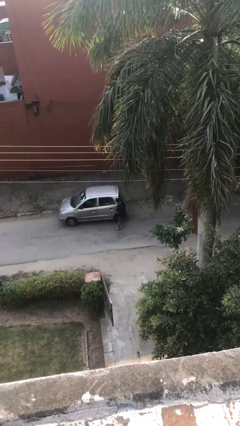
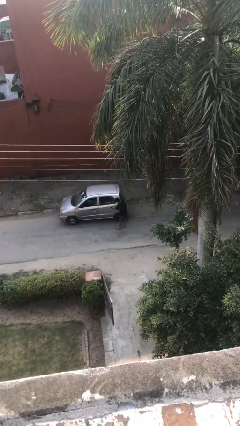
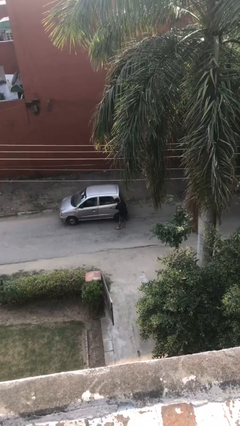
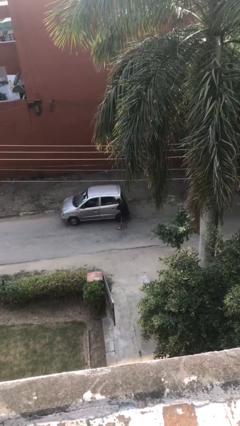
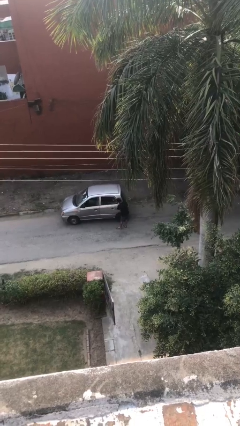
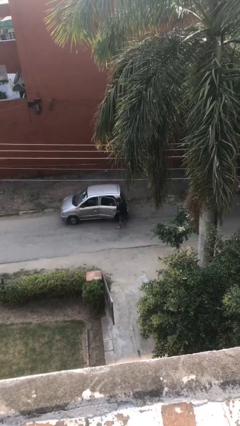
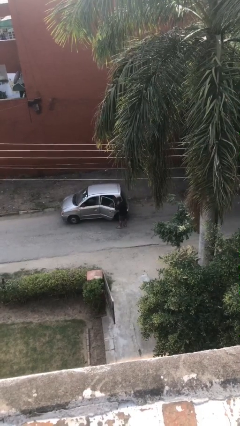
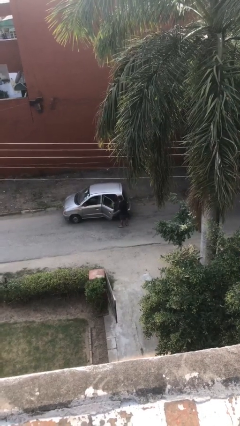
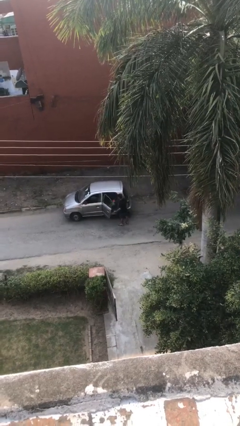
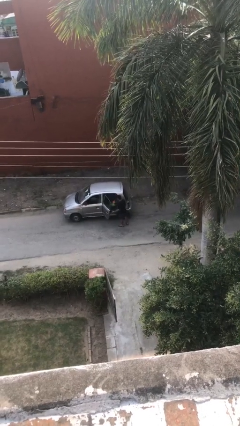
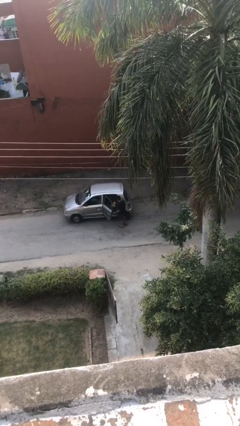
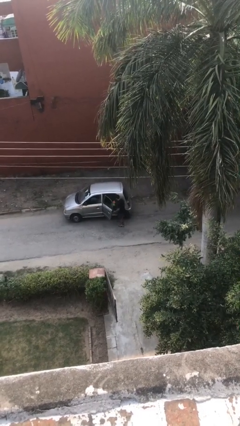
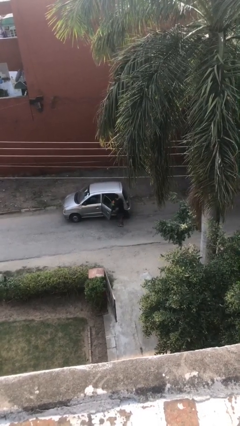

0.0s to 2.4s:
person opens car door

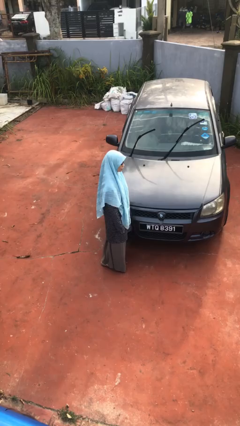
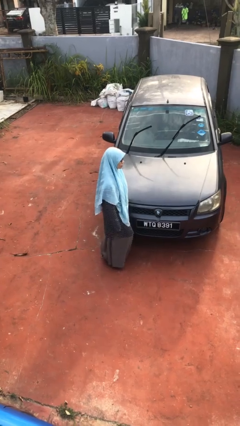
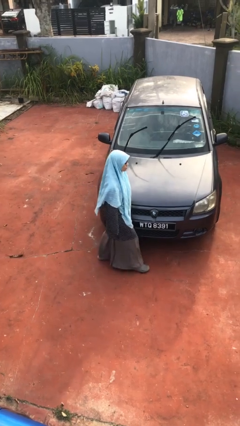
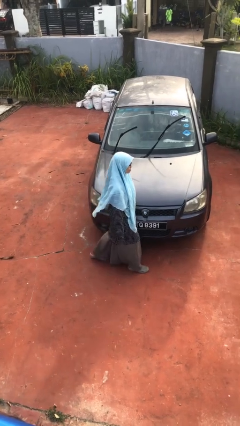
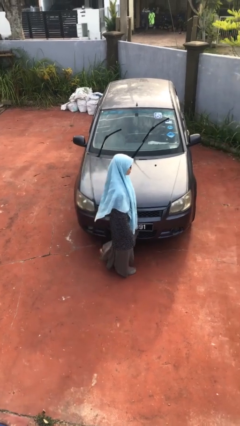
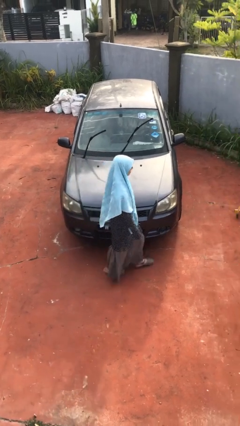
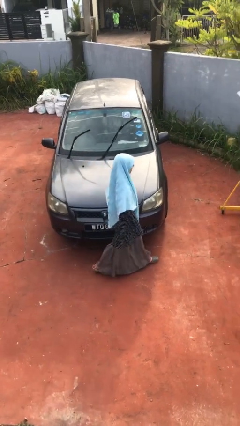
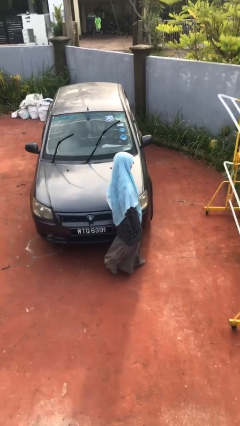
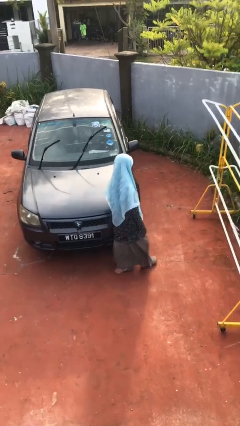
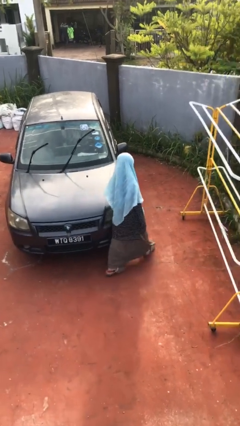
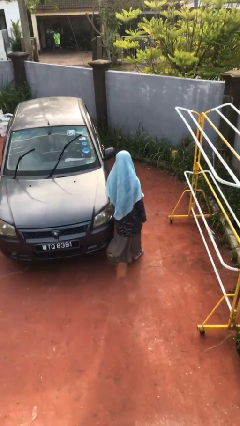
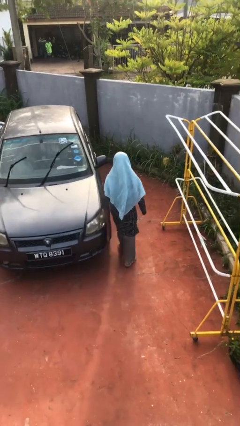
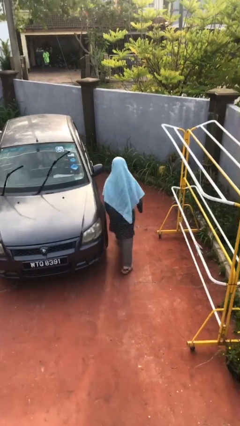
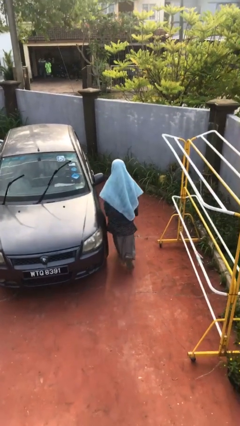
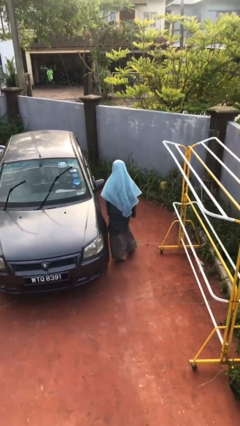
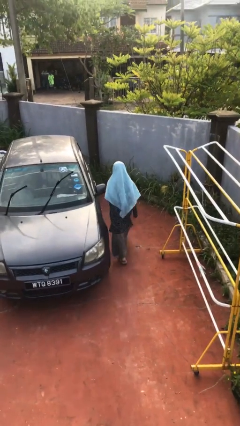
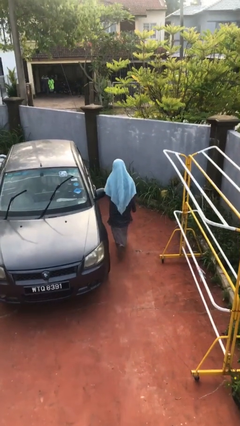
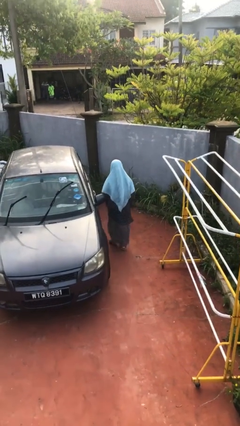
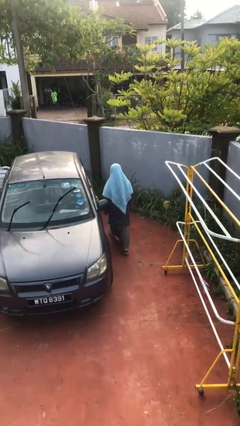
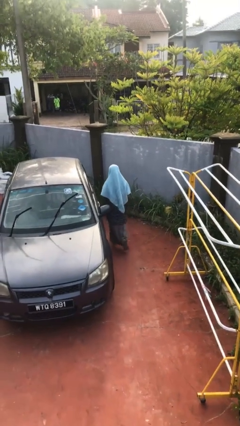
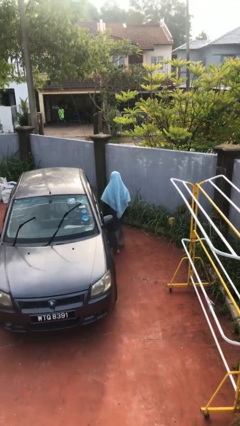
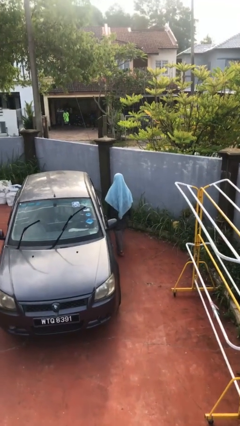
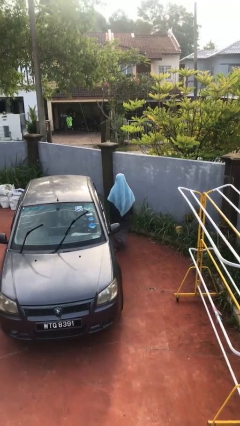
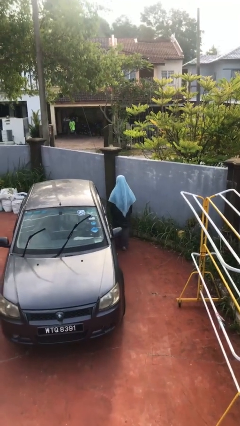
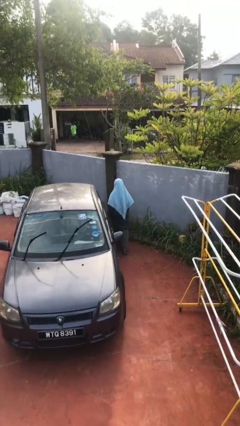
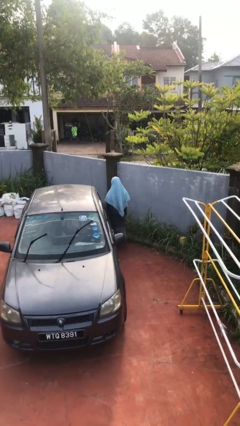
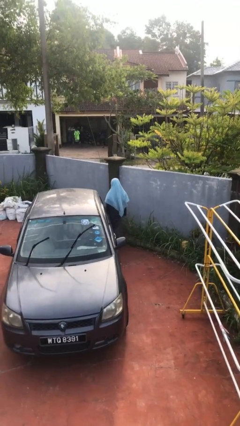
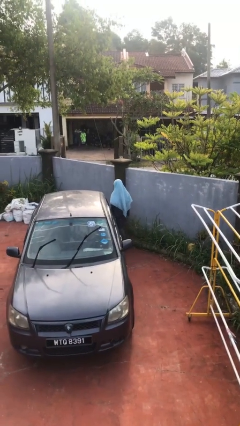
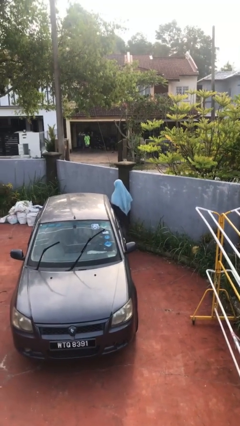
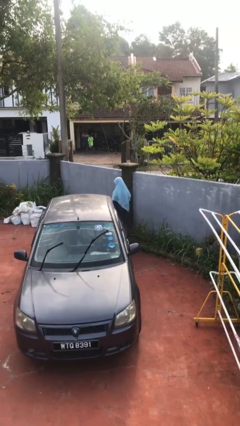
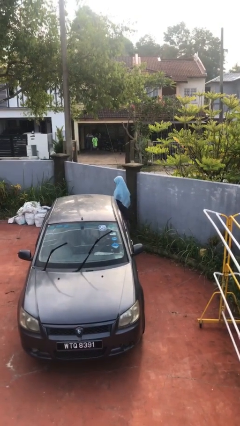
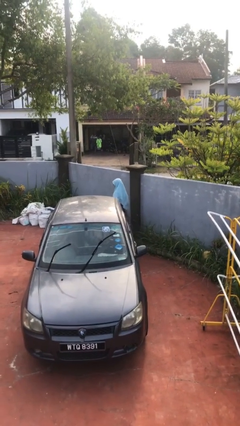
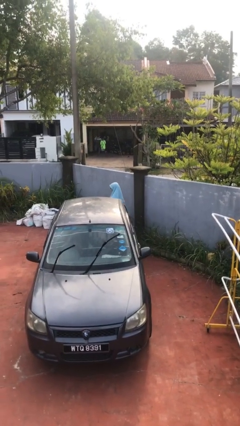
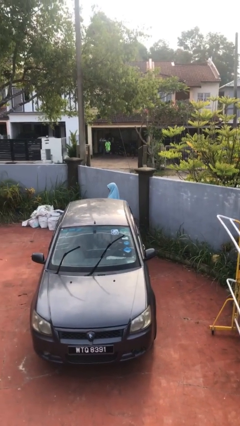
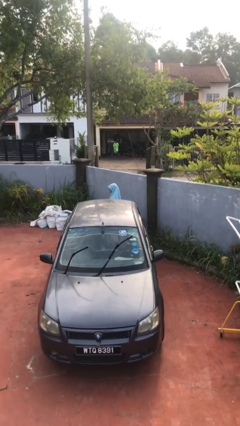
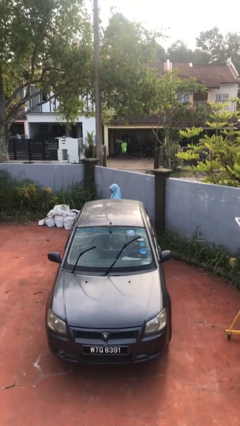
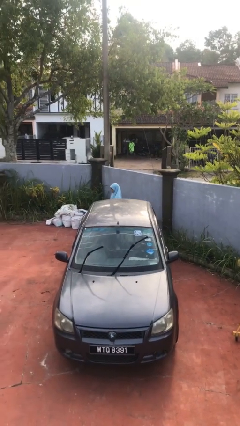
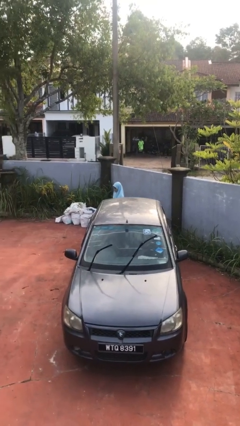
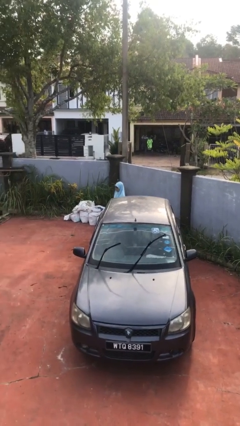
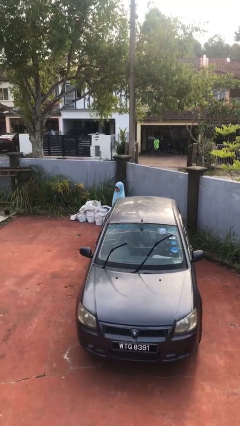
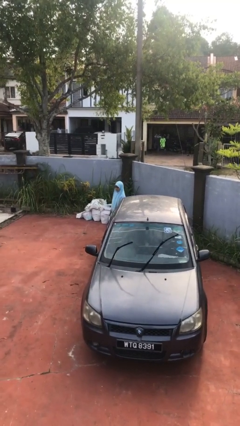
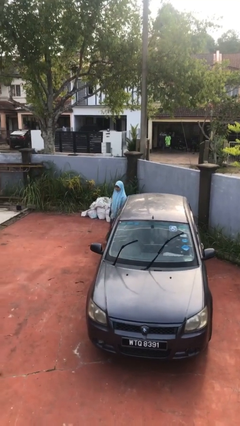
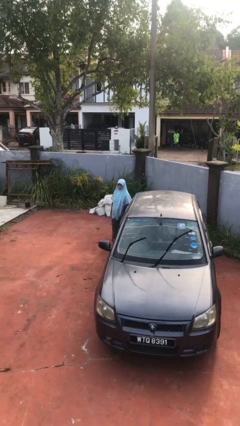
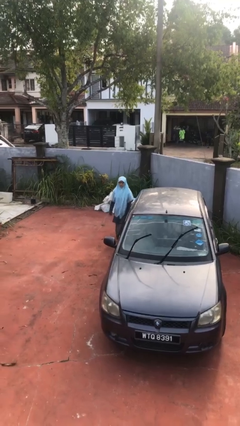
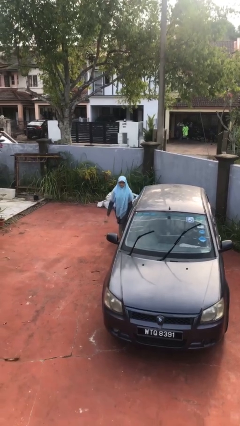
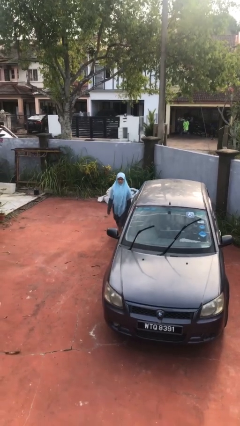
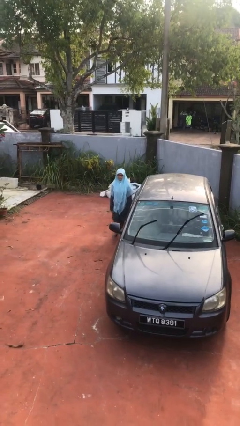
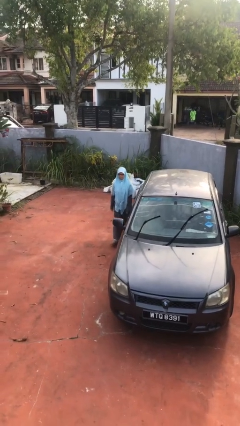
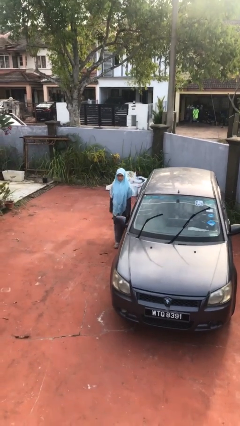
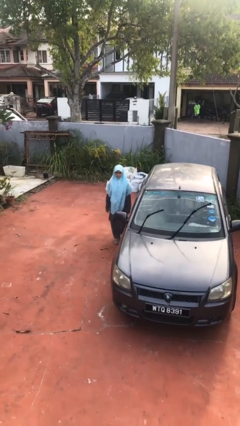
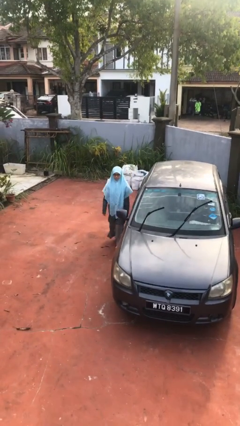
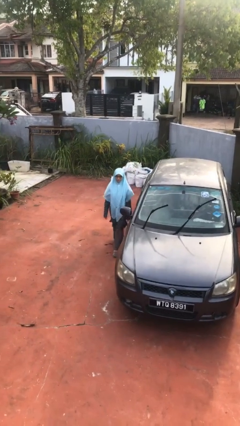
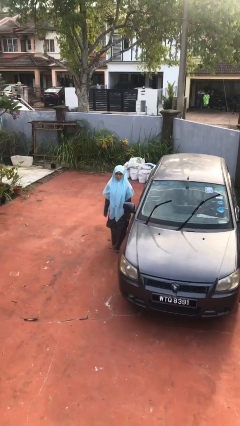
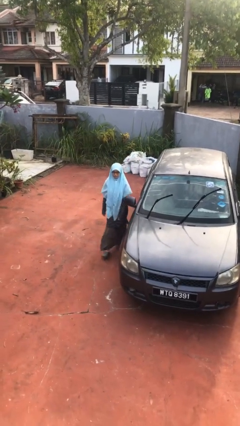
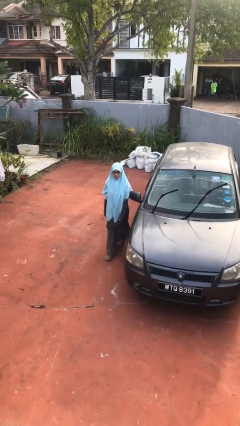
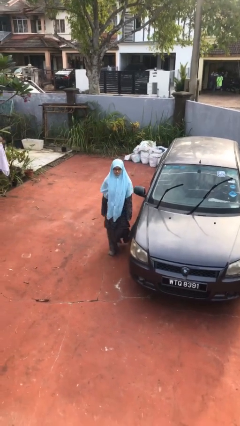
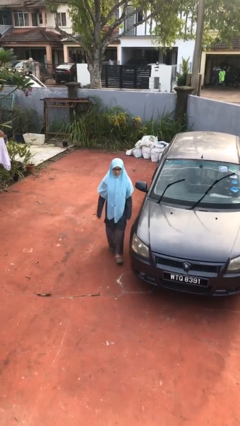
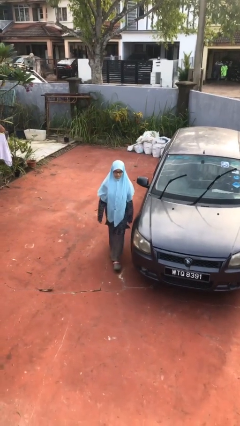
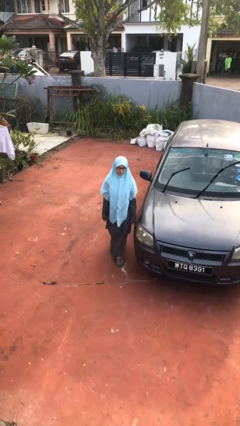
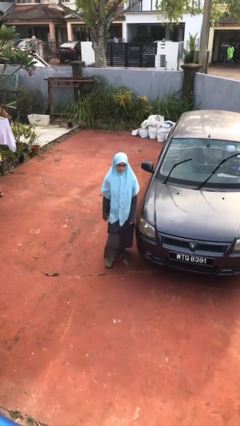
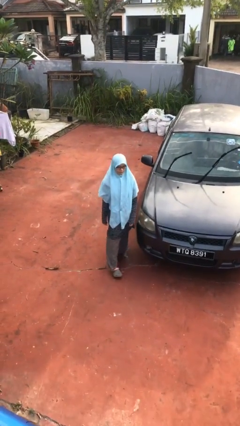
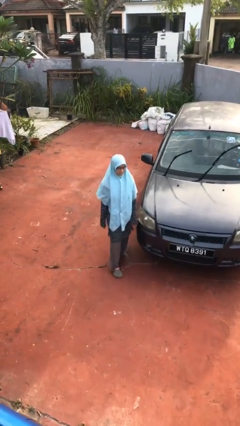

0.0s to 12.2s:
person walks around car

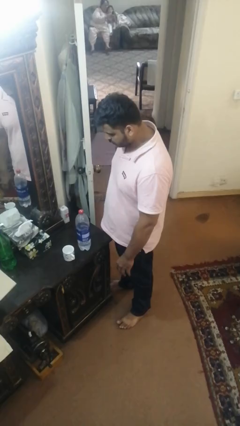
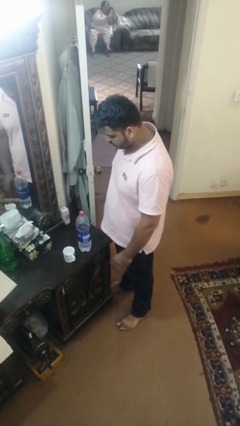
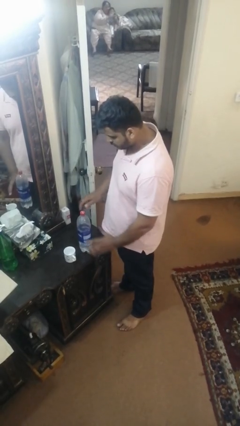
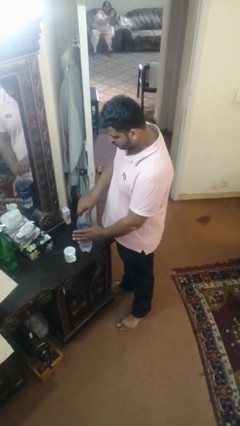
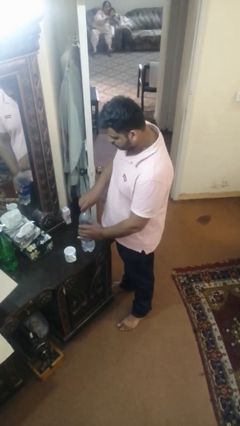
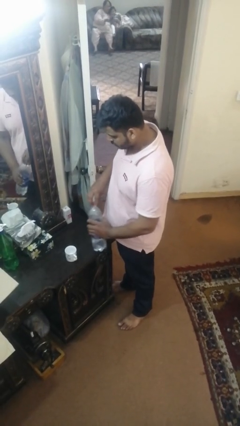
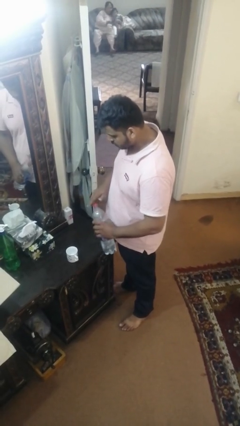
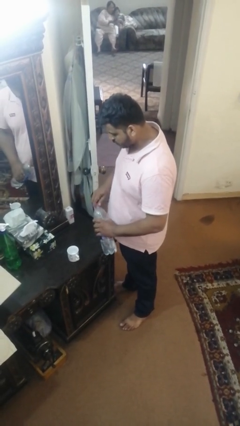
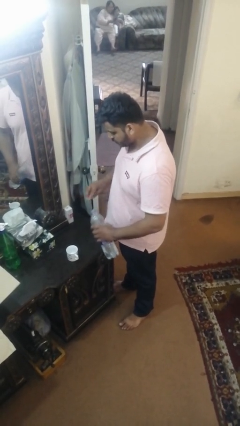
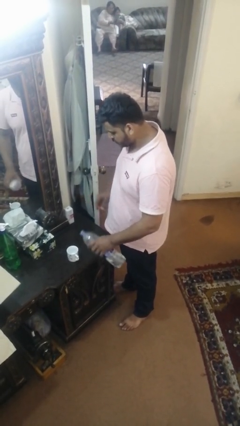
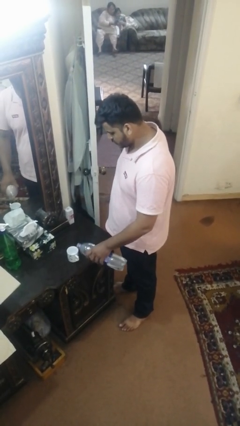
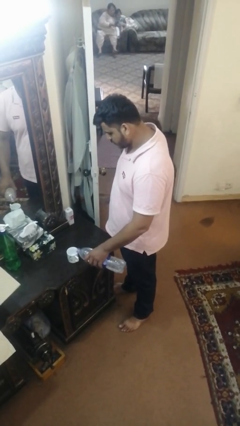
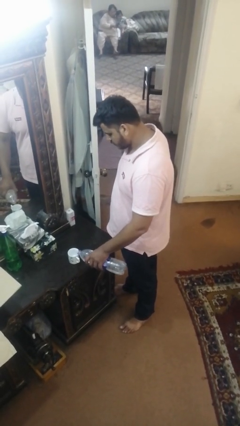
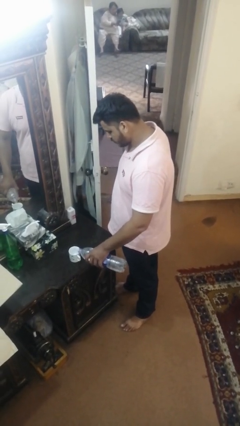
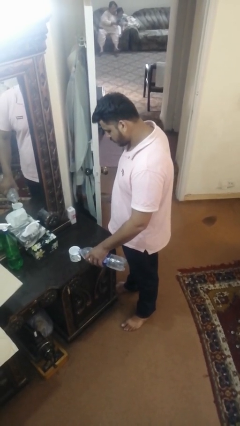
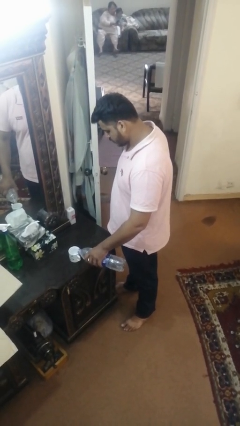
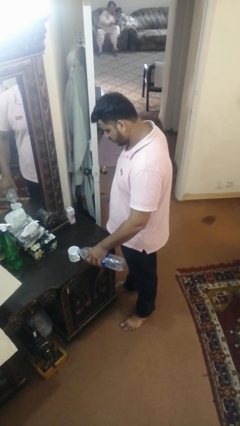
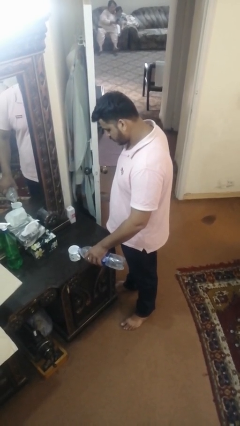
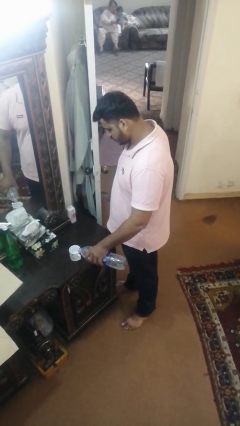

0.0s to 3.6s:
person pours liquid into cup
